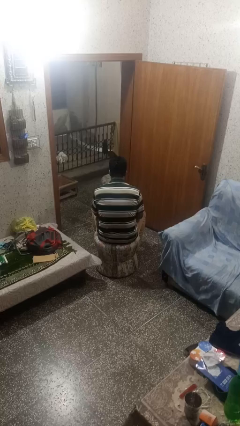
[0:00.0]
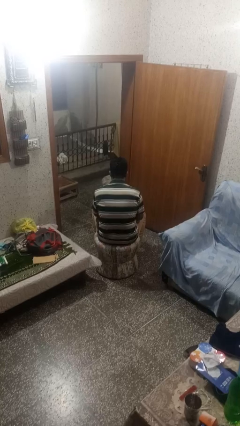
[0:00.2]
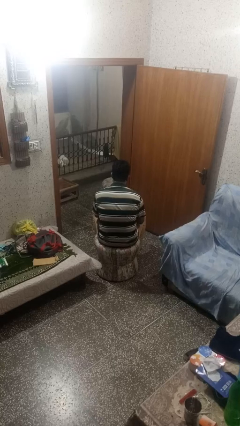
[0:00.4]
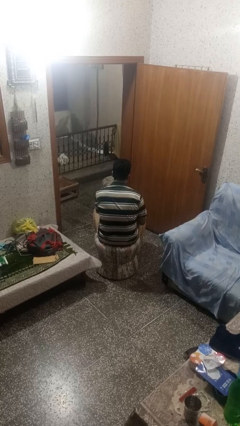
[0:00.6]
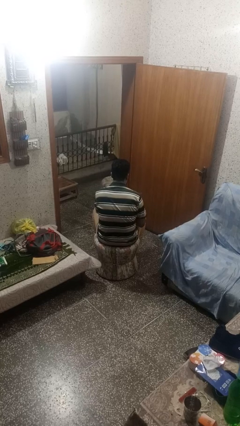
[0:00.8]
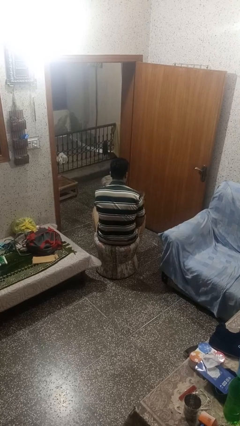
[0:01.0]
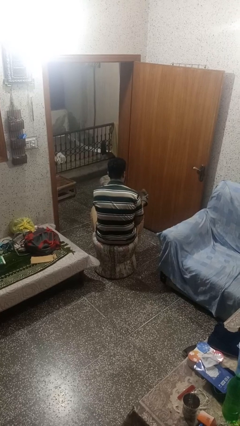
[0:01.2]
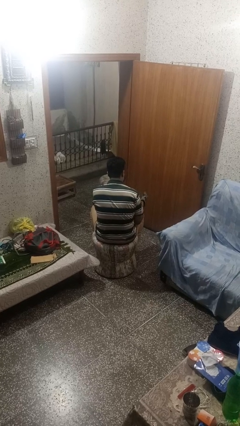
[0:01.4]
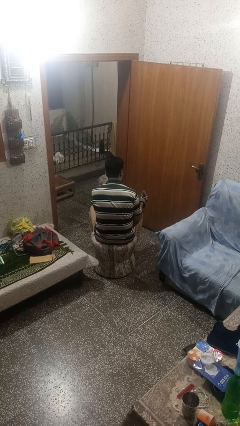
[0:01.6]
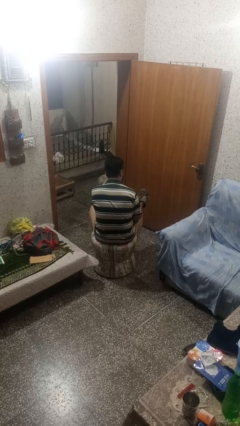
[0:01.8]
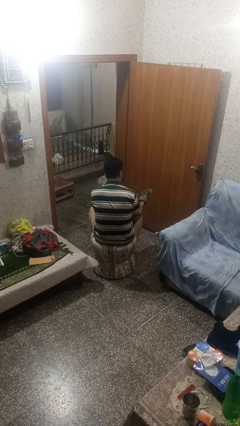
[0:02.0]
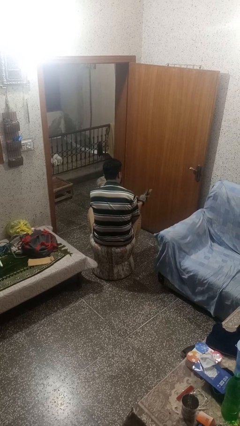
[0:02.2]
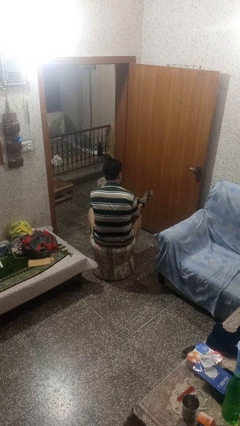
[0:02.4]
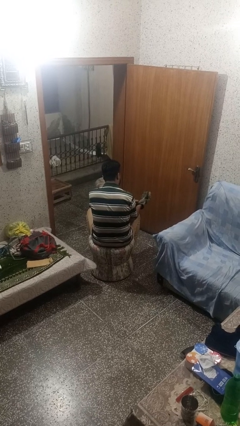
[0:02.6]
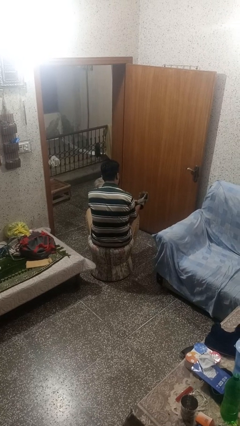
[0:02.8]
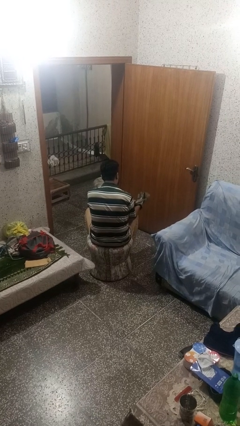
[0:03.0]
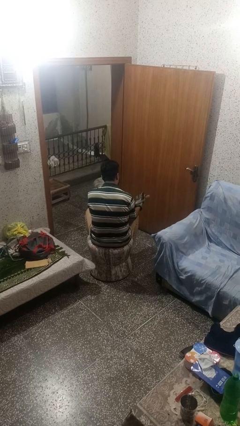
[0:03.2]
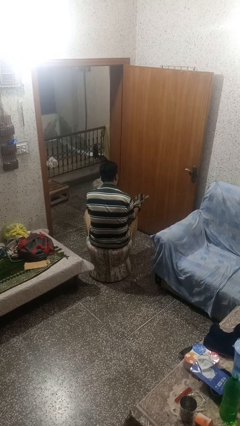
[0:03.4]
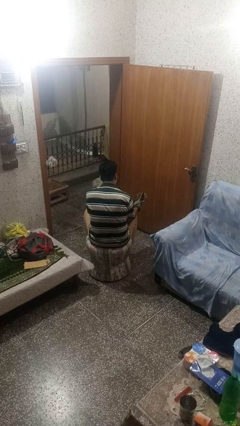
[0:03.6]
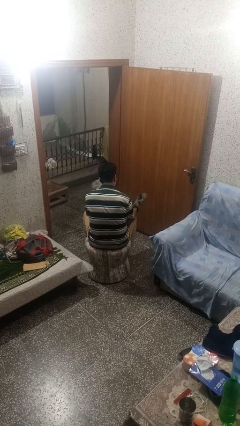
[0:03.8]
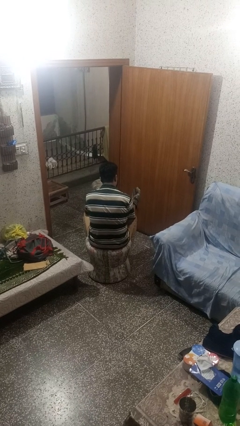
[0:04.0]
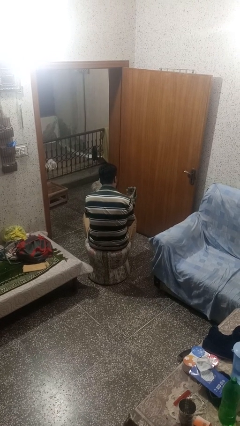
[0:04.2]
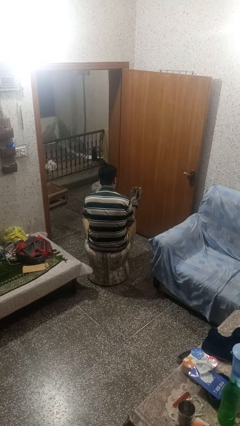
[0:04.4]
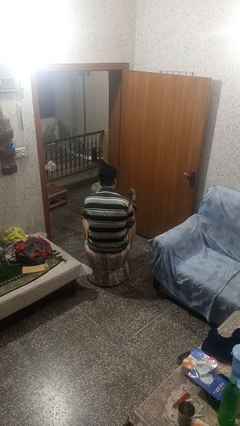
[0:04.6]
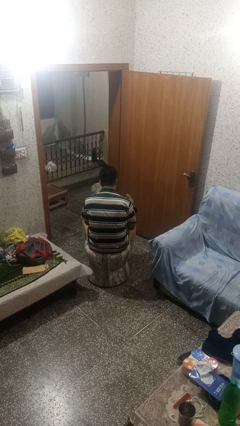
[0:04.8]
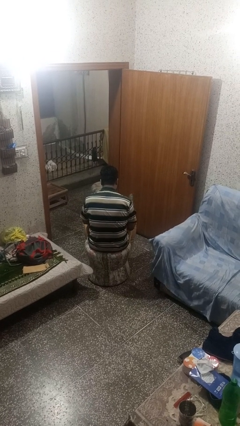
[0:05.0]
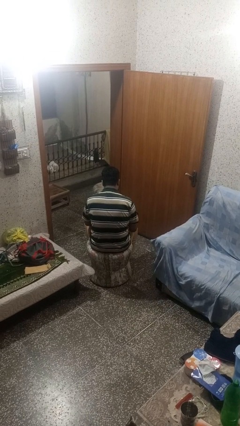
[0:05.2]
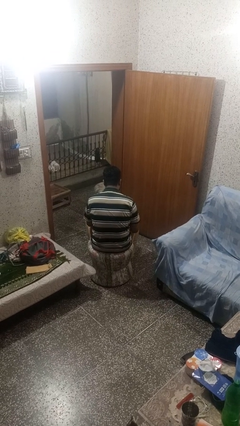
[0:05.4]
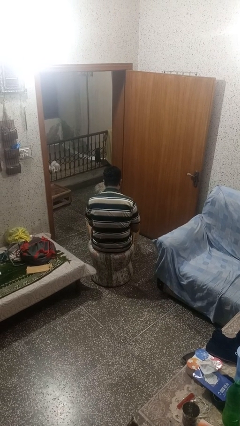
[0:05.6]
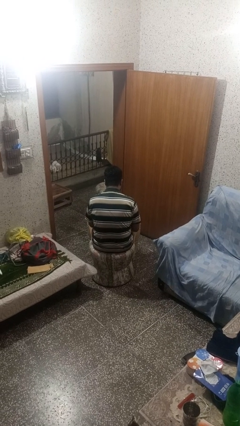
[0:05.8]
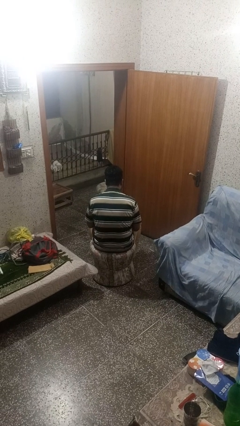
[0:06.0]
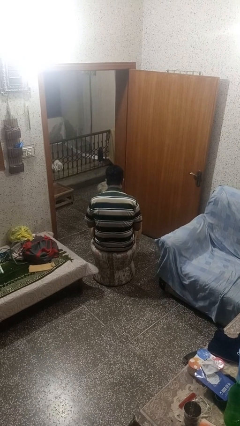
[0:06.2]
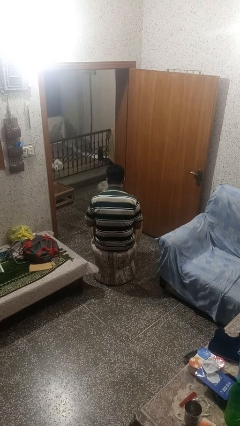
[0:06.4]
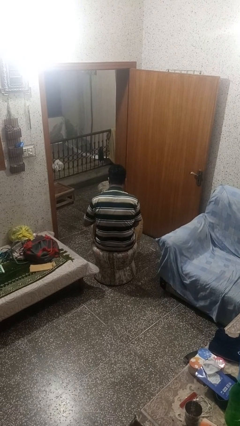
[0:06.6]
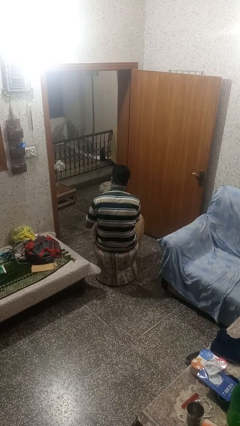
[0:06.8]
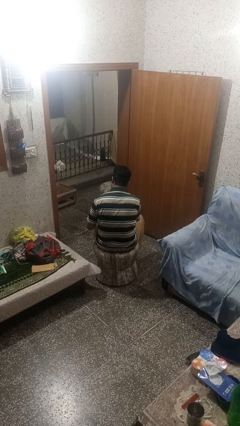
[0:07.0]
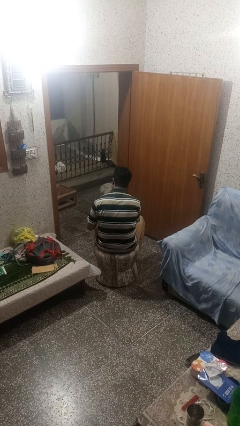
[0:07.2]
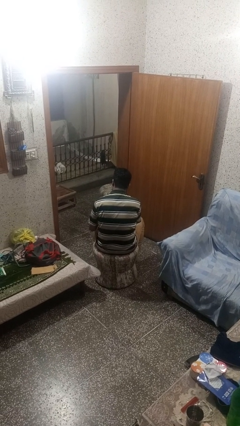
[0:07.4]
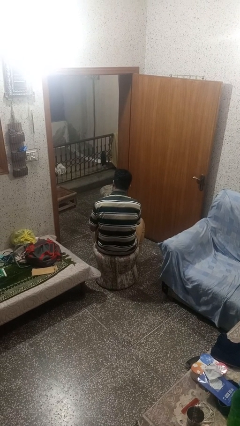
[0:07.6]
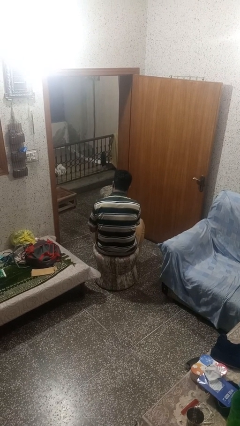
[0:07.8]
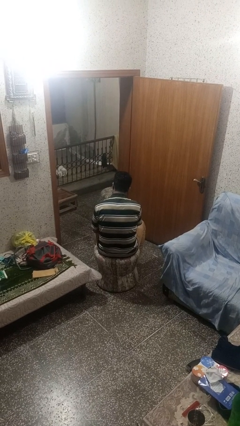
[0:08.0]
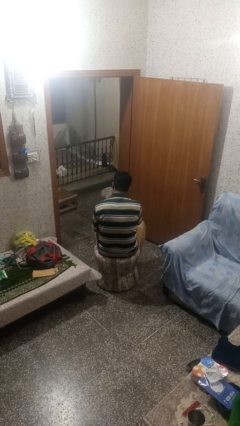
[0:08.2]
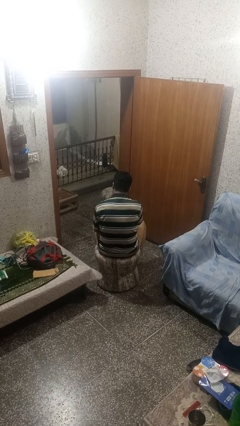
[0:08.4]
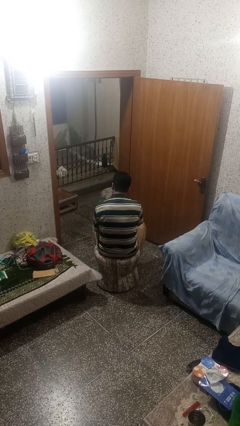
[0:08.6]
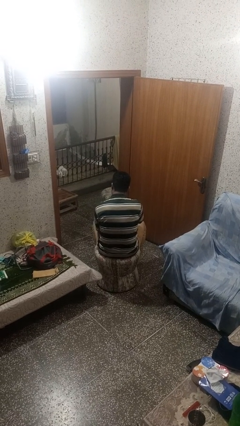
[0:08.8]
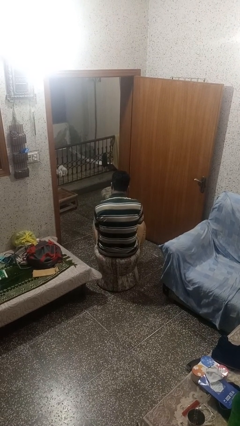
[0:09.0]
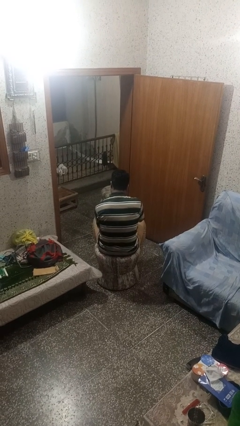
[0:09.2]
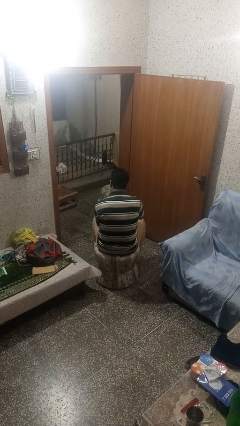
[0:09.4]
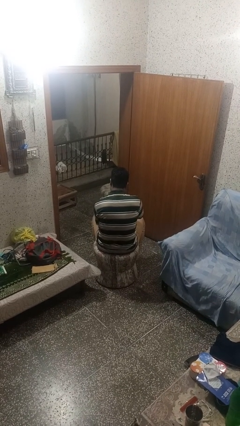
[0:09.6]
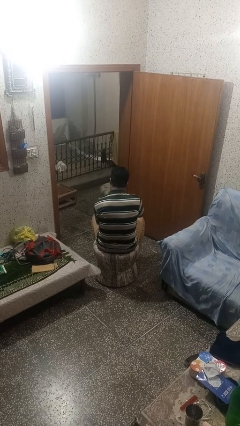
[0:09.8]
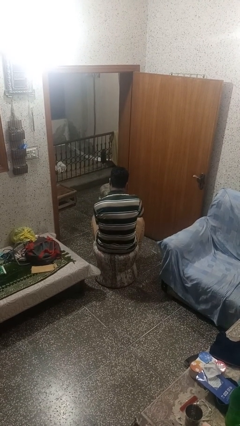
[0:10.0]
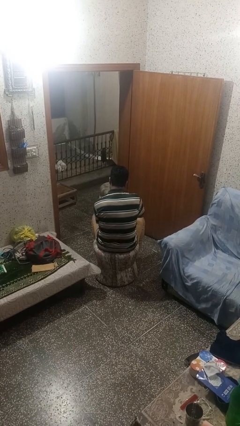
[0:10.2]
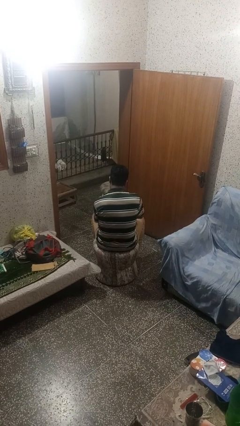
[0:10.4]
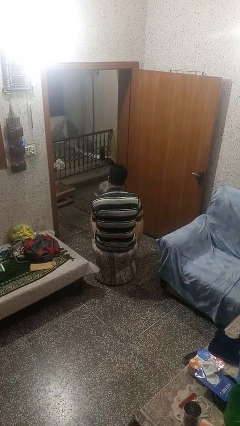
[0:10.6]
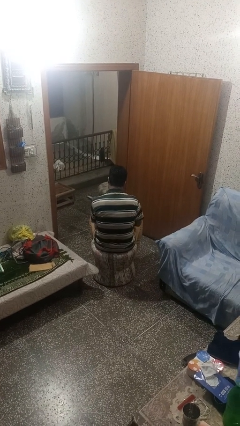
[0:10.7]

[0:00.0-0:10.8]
person puts on gloves

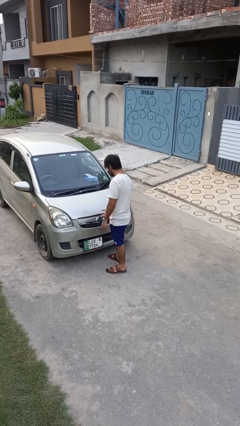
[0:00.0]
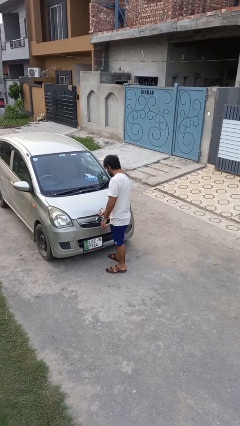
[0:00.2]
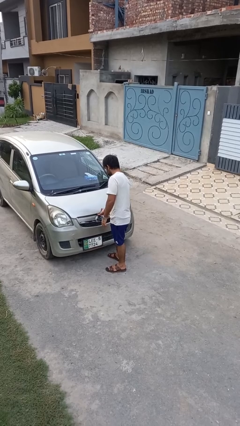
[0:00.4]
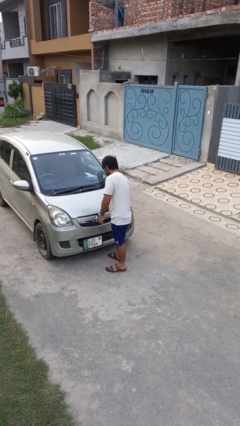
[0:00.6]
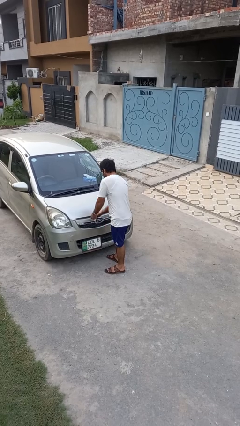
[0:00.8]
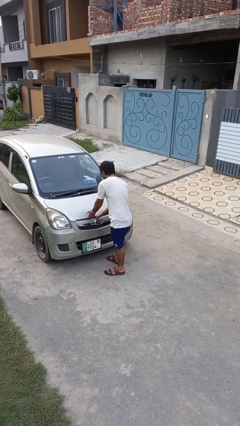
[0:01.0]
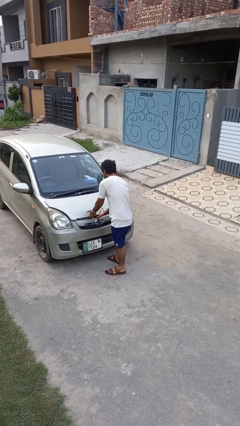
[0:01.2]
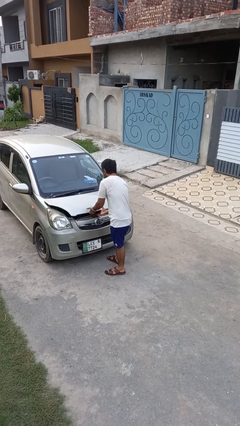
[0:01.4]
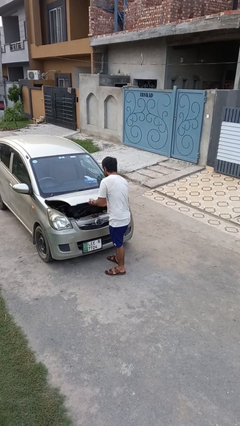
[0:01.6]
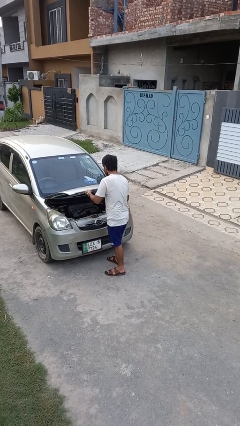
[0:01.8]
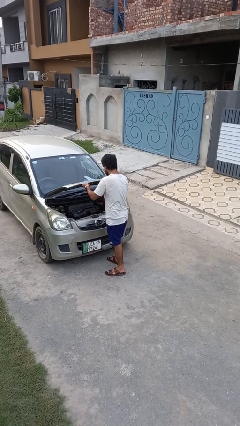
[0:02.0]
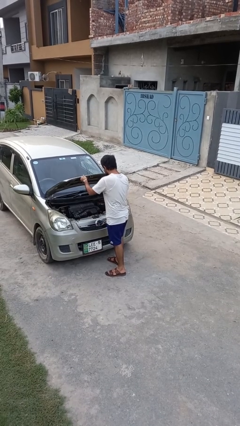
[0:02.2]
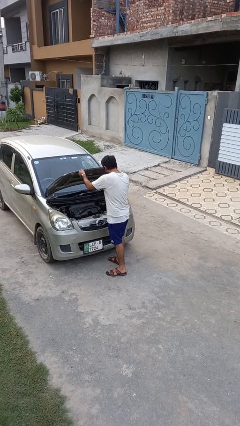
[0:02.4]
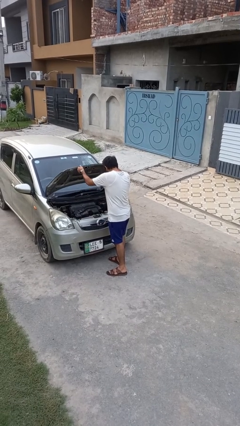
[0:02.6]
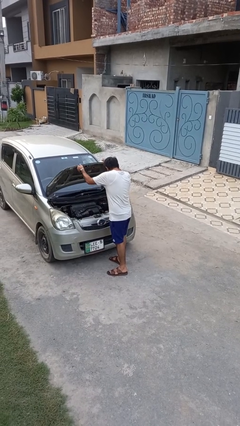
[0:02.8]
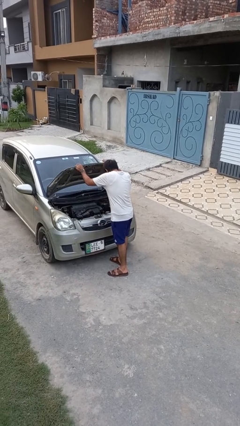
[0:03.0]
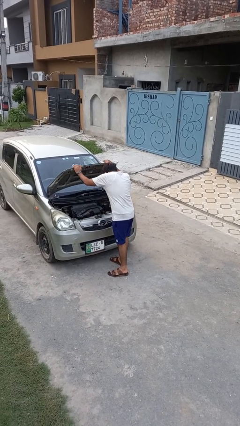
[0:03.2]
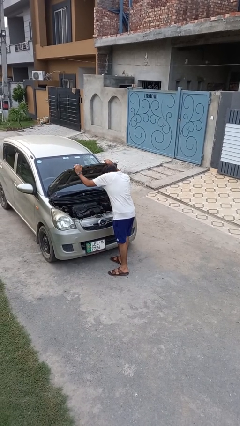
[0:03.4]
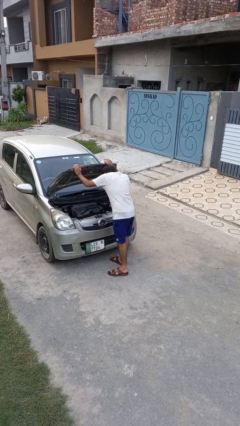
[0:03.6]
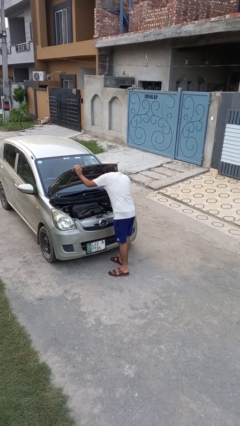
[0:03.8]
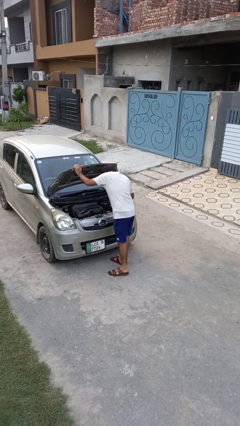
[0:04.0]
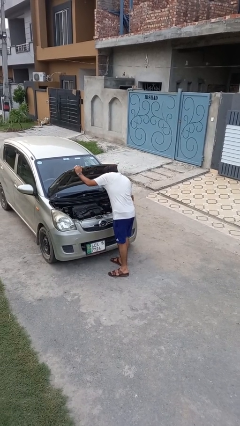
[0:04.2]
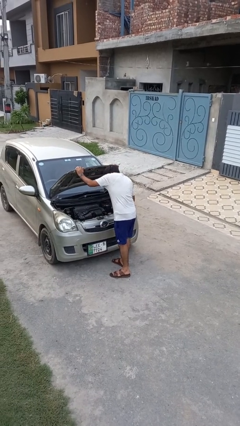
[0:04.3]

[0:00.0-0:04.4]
person opens car hood

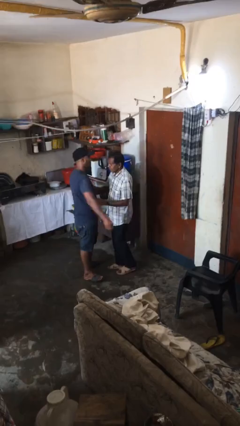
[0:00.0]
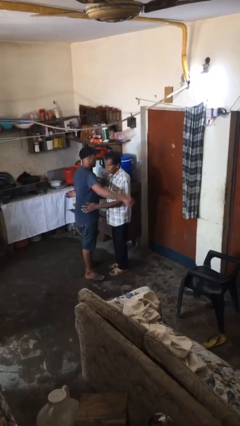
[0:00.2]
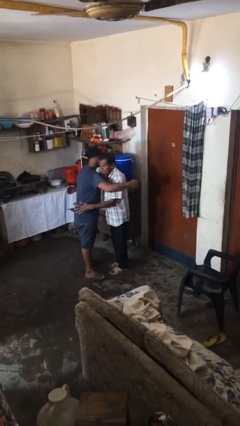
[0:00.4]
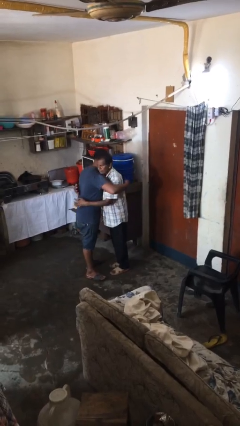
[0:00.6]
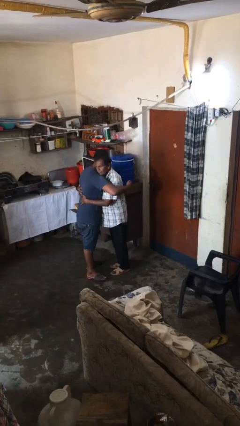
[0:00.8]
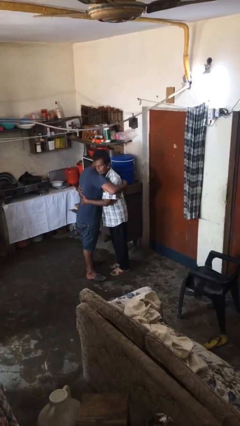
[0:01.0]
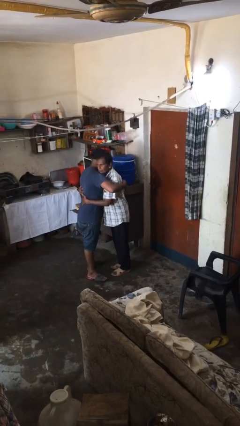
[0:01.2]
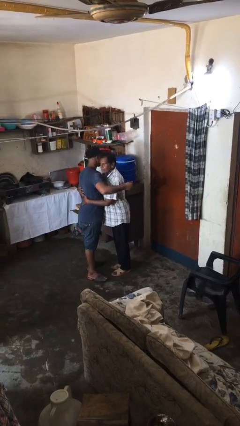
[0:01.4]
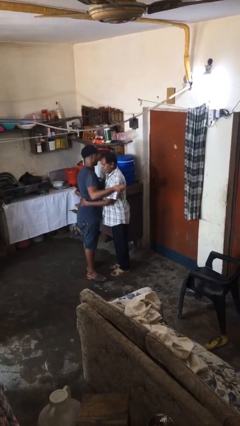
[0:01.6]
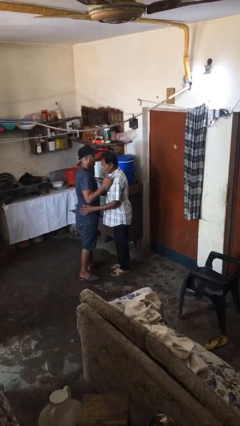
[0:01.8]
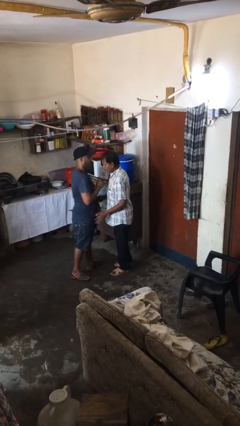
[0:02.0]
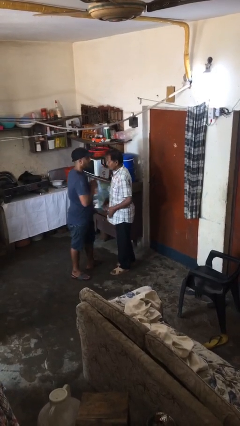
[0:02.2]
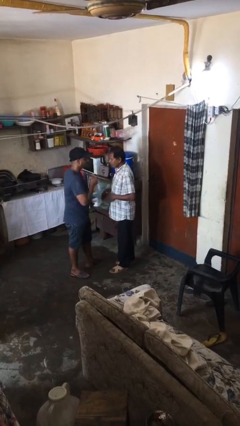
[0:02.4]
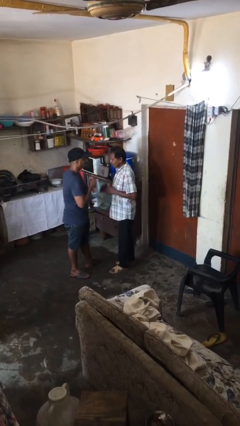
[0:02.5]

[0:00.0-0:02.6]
person embraces person
